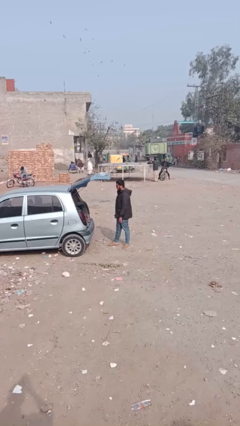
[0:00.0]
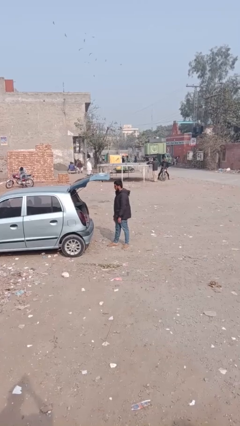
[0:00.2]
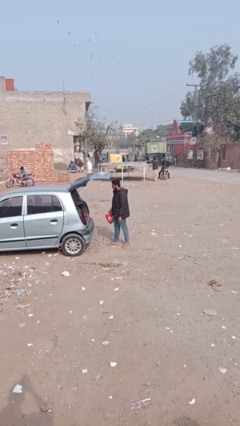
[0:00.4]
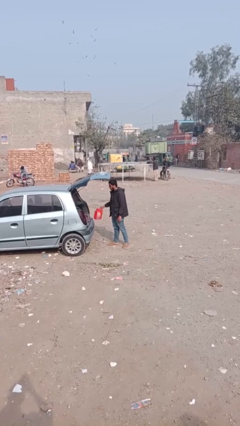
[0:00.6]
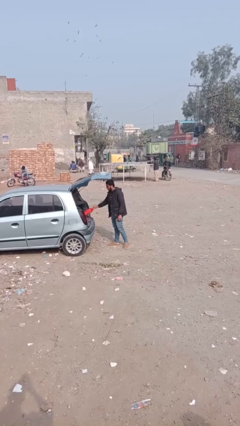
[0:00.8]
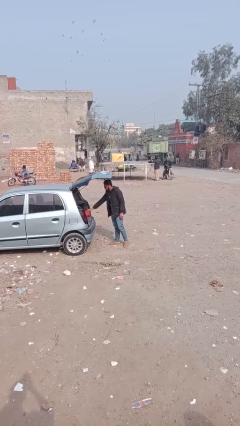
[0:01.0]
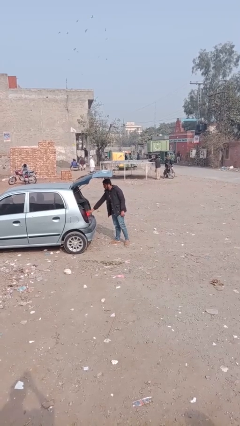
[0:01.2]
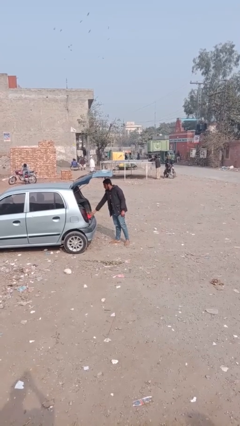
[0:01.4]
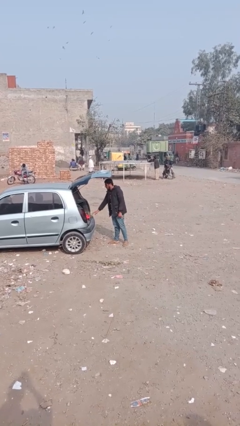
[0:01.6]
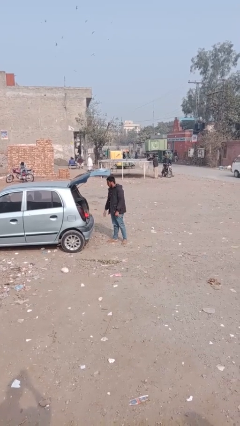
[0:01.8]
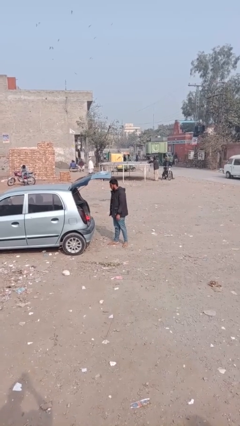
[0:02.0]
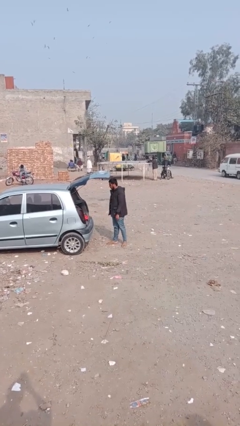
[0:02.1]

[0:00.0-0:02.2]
person loads car

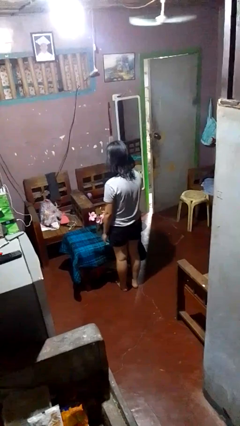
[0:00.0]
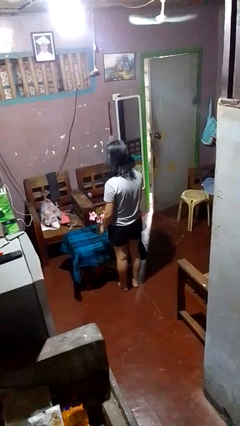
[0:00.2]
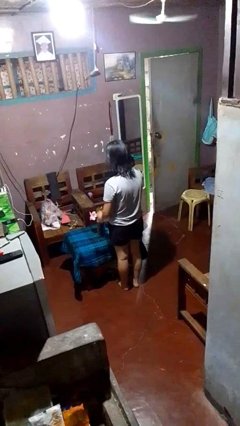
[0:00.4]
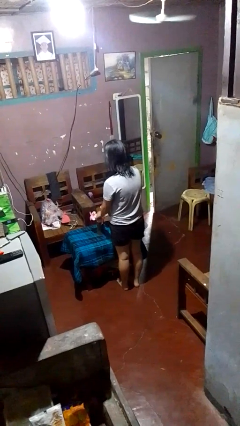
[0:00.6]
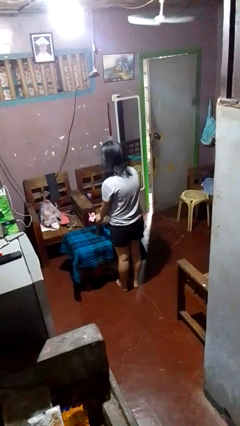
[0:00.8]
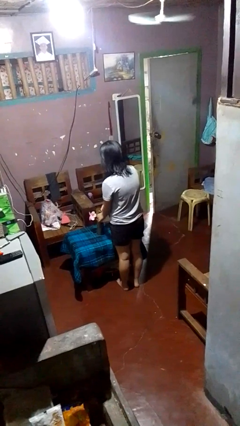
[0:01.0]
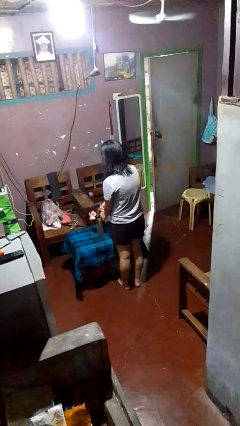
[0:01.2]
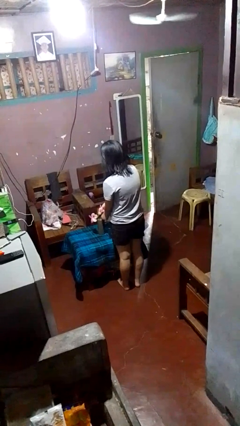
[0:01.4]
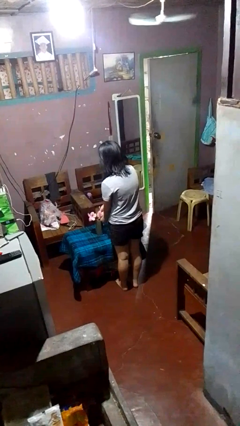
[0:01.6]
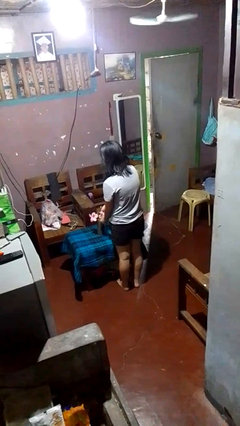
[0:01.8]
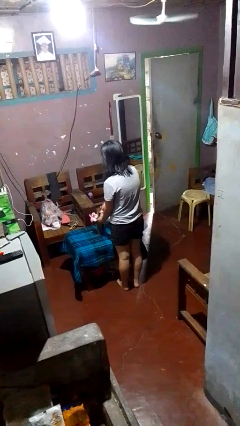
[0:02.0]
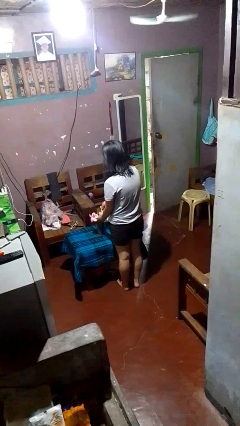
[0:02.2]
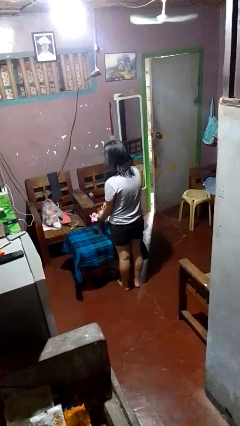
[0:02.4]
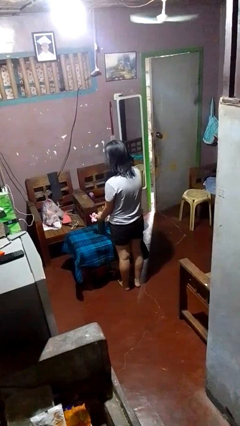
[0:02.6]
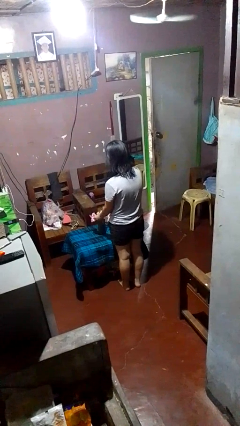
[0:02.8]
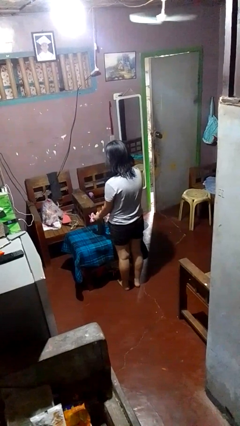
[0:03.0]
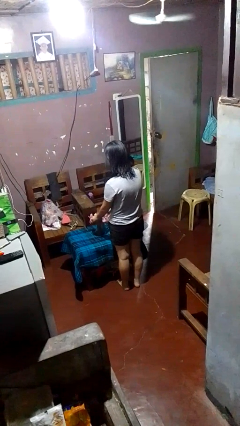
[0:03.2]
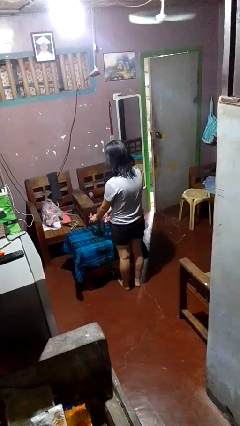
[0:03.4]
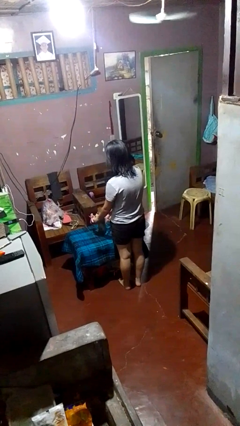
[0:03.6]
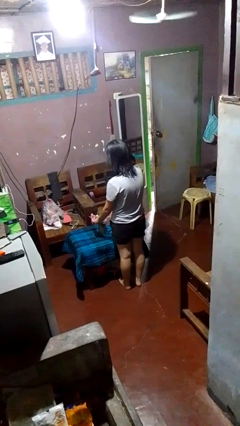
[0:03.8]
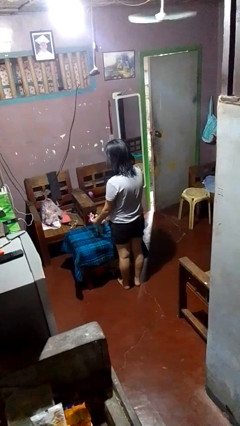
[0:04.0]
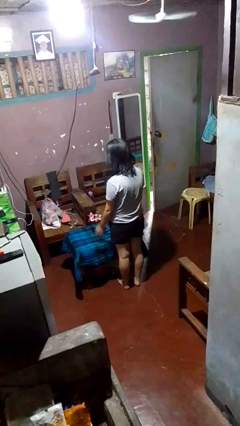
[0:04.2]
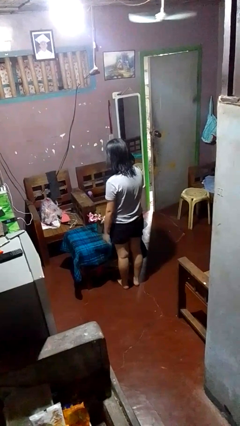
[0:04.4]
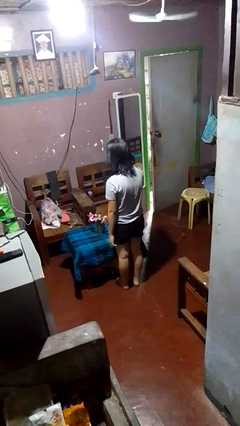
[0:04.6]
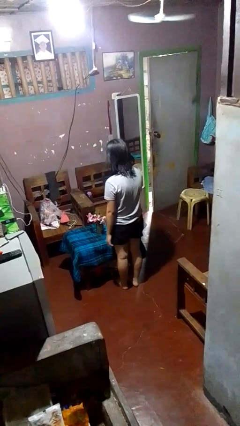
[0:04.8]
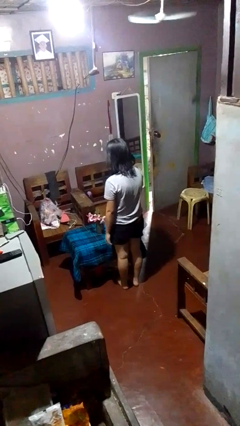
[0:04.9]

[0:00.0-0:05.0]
person arranges flowers in vase

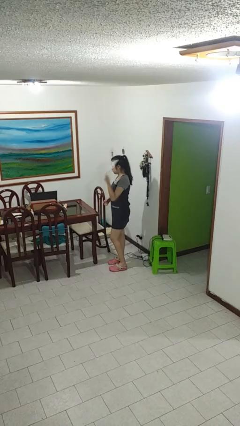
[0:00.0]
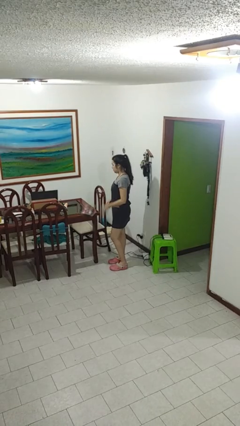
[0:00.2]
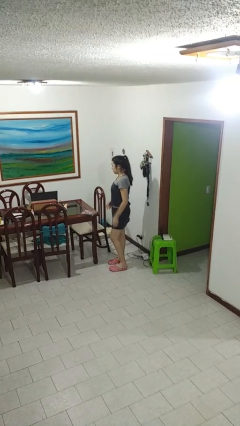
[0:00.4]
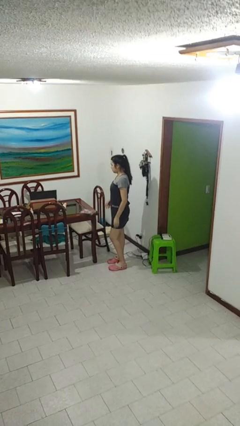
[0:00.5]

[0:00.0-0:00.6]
person throws object on table

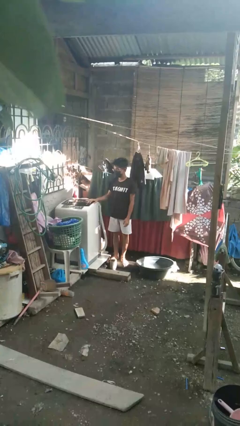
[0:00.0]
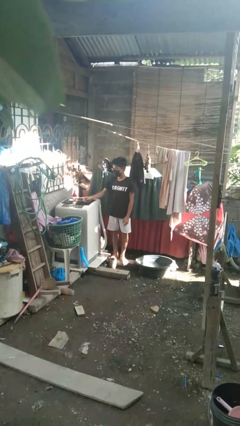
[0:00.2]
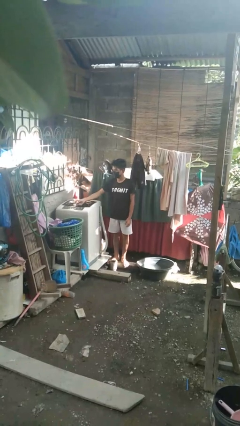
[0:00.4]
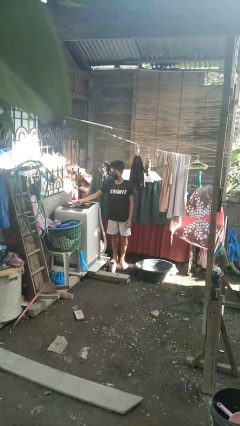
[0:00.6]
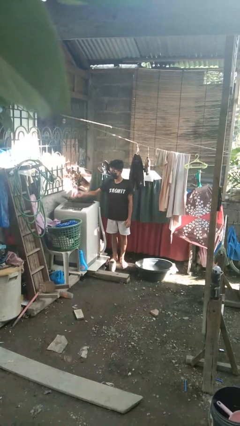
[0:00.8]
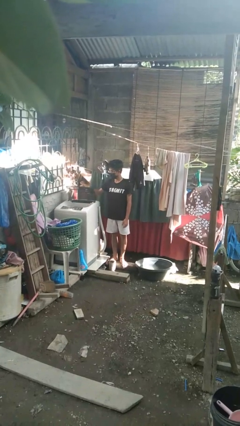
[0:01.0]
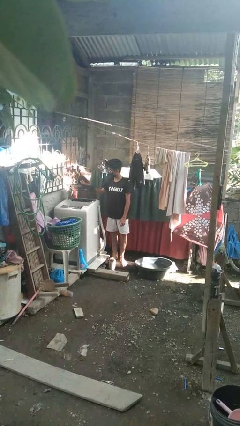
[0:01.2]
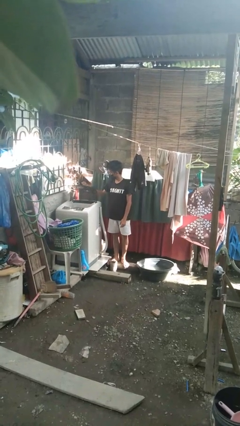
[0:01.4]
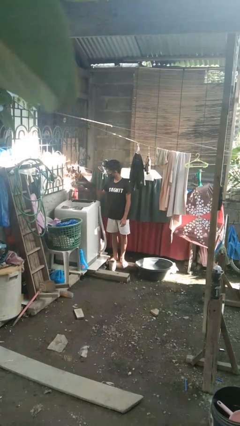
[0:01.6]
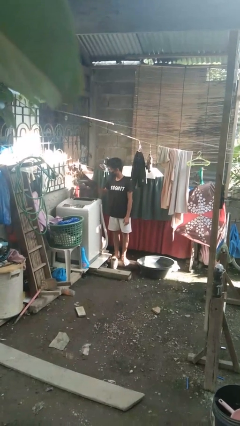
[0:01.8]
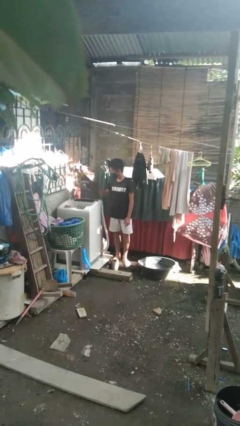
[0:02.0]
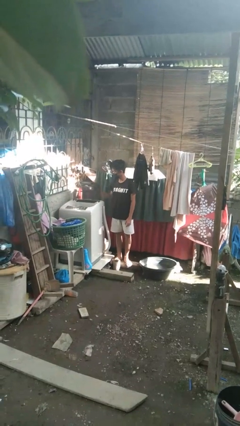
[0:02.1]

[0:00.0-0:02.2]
person opens clothes washer

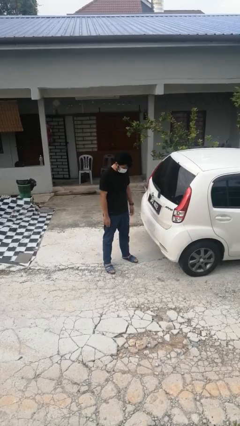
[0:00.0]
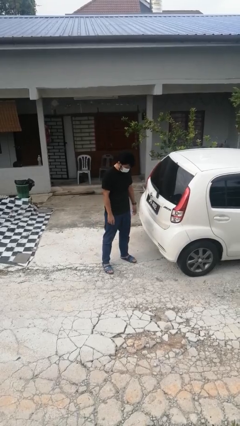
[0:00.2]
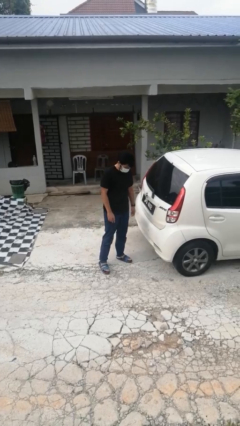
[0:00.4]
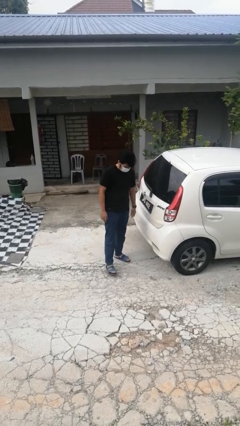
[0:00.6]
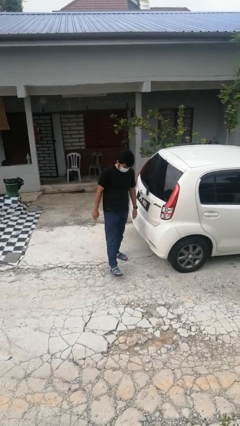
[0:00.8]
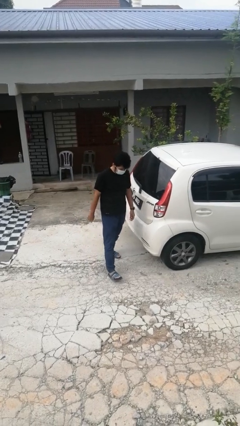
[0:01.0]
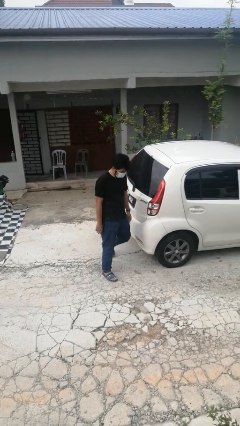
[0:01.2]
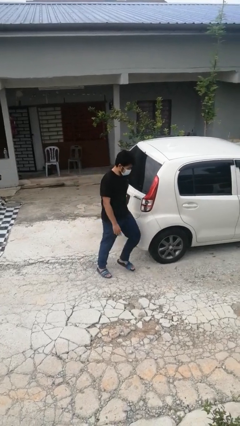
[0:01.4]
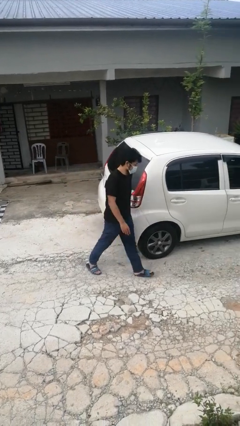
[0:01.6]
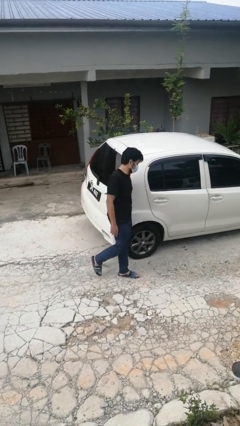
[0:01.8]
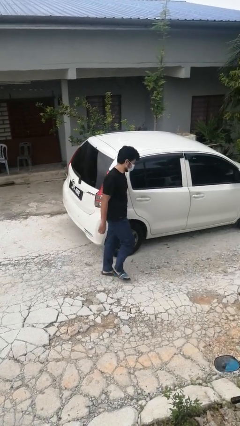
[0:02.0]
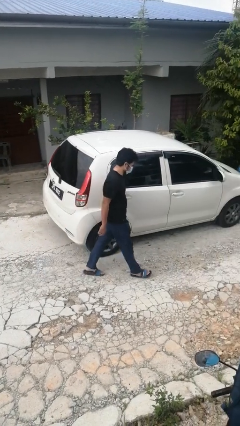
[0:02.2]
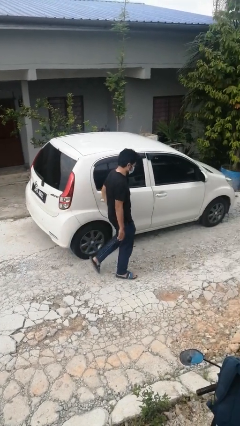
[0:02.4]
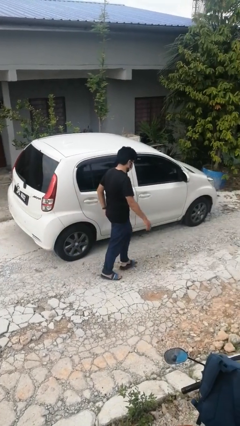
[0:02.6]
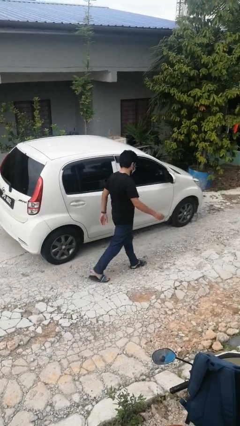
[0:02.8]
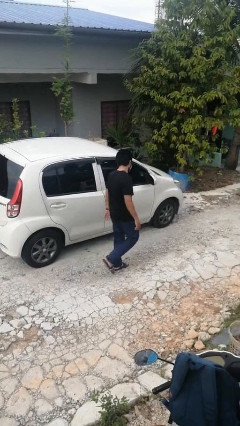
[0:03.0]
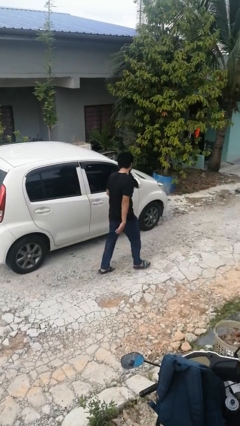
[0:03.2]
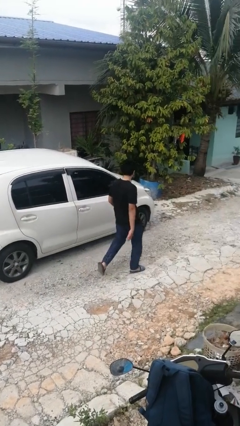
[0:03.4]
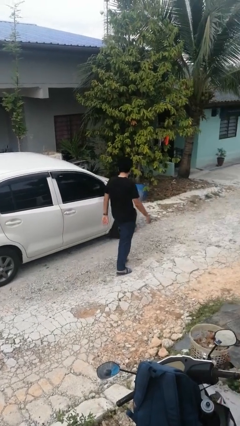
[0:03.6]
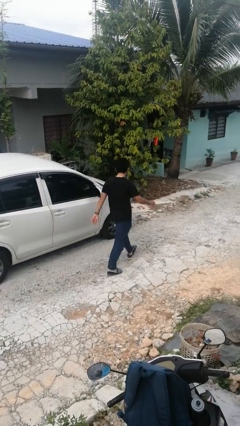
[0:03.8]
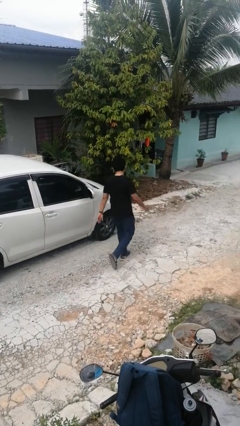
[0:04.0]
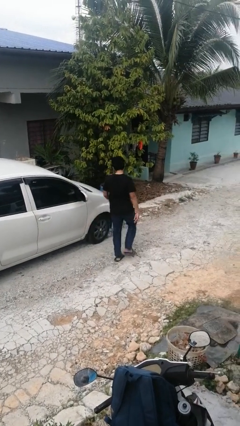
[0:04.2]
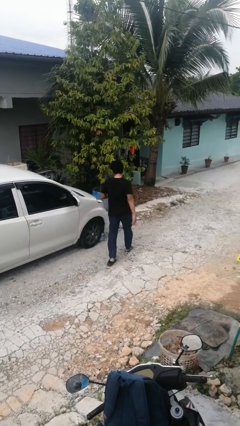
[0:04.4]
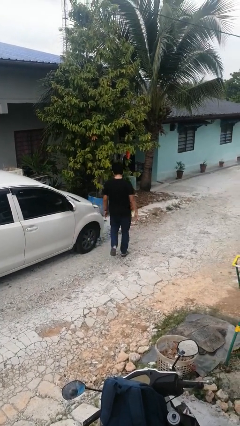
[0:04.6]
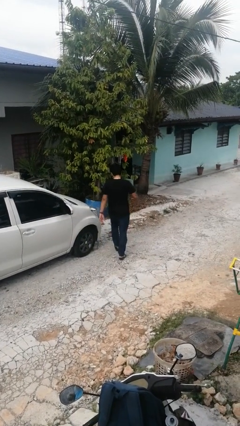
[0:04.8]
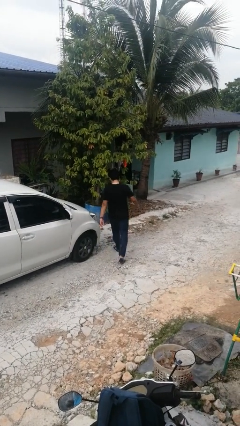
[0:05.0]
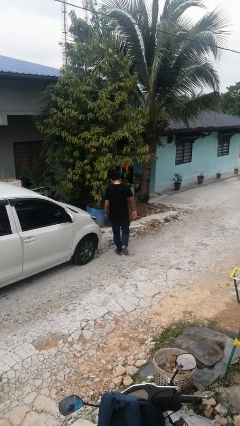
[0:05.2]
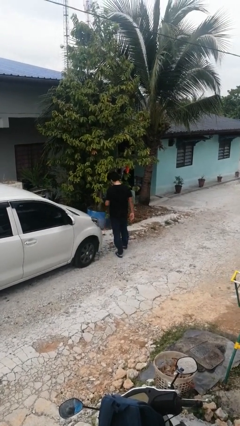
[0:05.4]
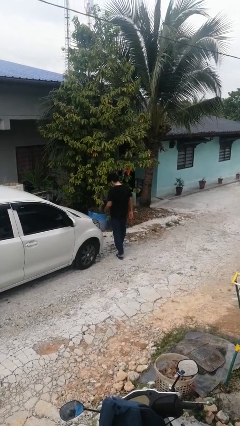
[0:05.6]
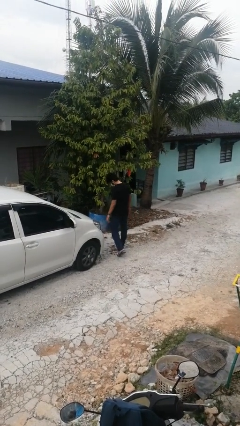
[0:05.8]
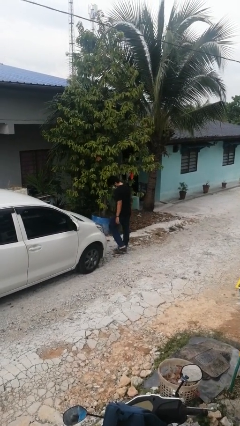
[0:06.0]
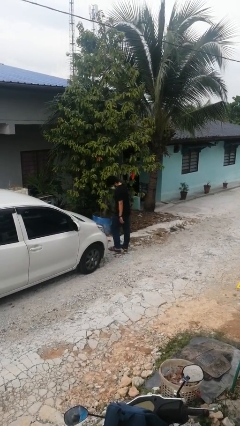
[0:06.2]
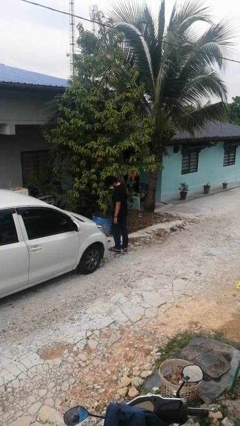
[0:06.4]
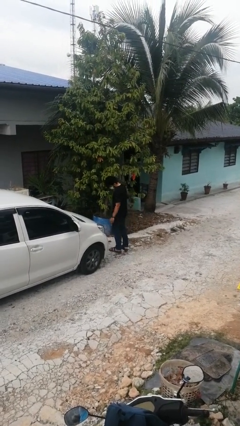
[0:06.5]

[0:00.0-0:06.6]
person walks around car

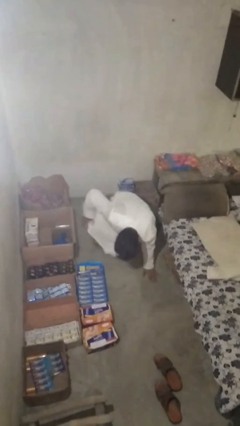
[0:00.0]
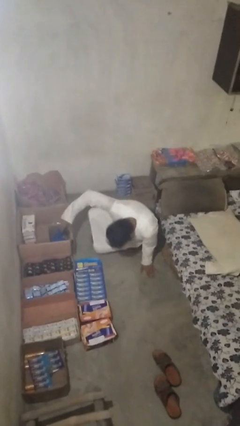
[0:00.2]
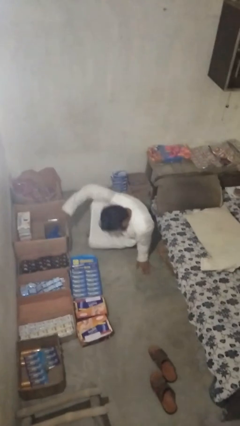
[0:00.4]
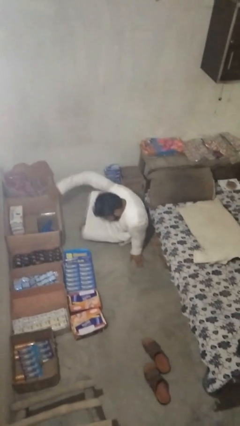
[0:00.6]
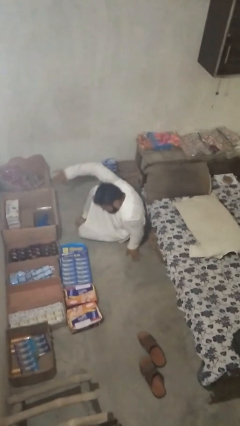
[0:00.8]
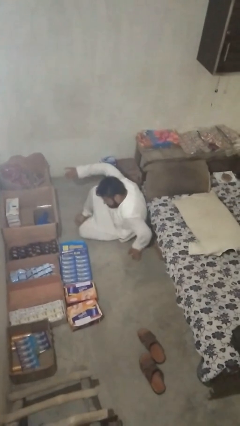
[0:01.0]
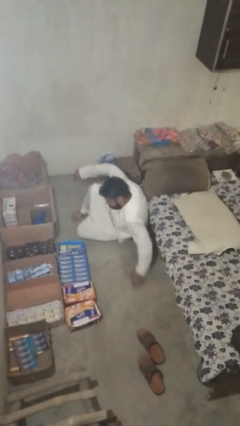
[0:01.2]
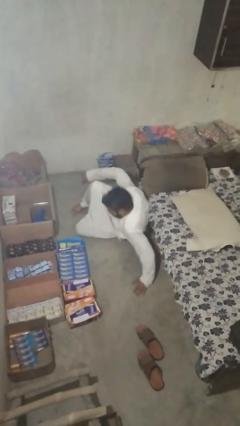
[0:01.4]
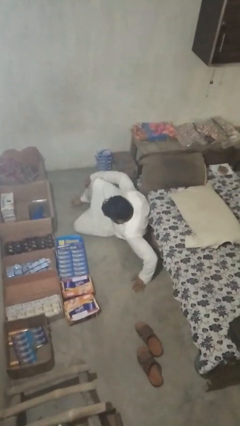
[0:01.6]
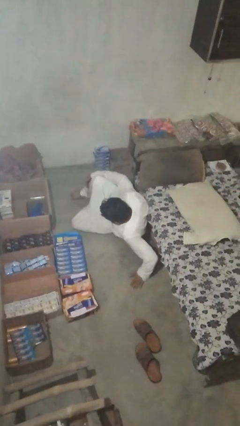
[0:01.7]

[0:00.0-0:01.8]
person lies down on floor
